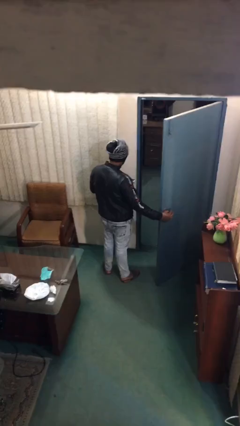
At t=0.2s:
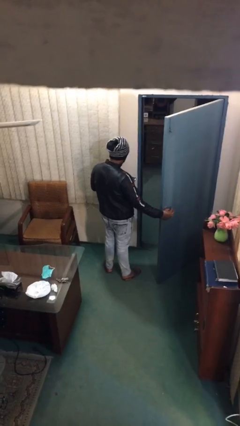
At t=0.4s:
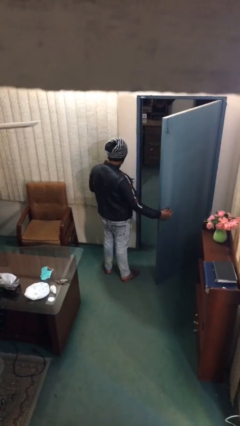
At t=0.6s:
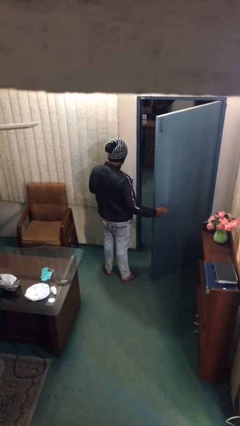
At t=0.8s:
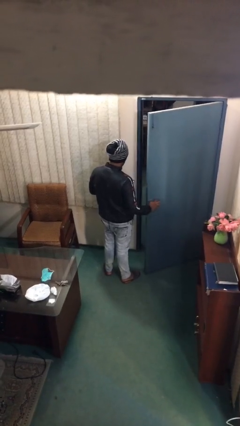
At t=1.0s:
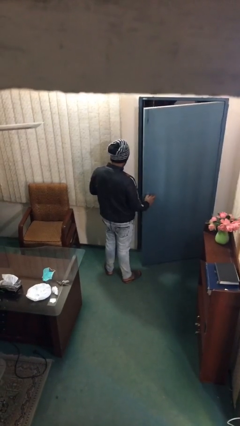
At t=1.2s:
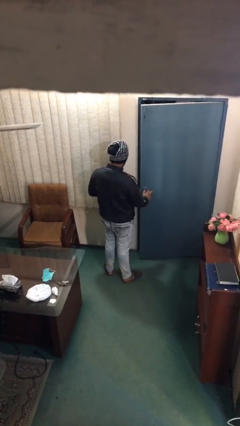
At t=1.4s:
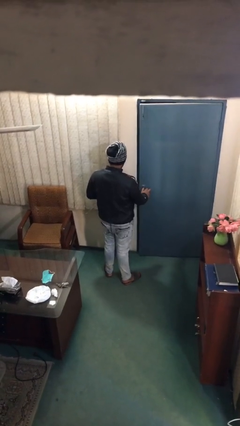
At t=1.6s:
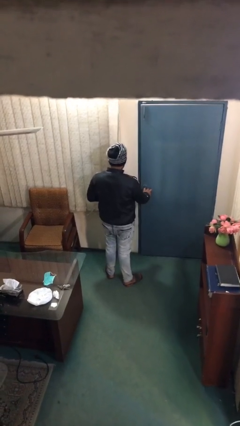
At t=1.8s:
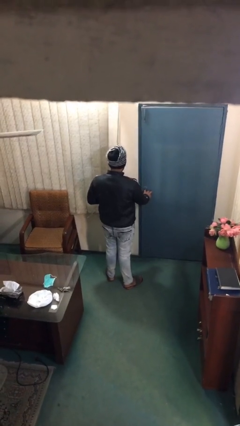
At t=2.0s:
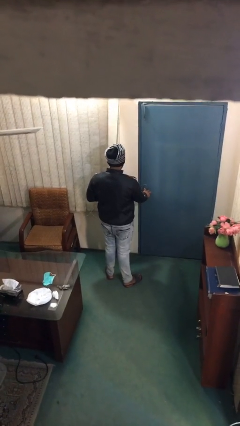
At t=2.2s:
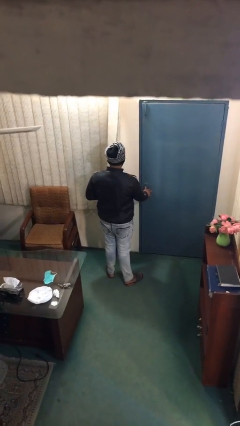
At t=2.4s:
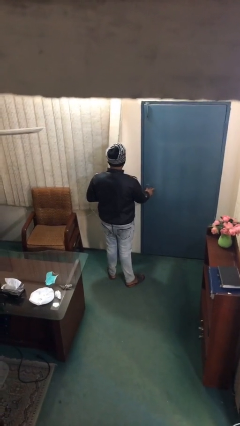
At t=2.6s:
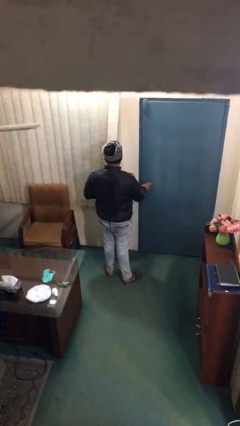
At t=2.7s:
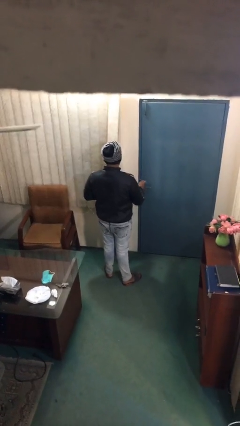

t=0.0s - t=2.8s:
person closes facility door

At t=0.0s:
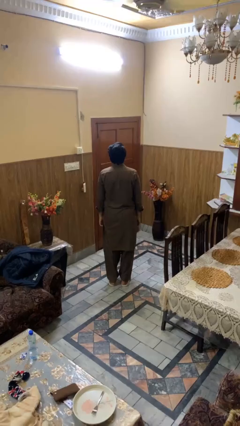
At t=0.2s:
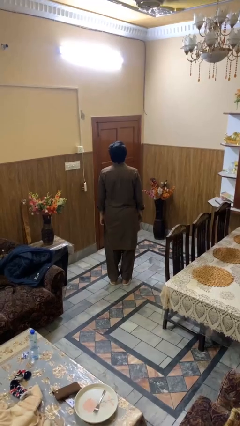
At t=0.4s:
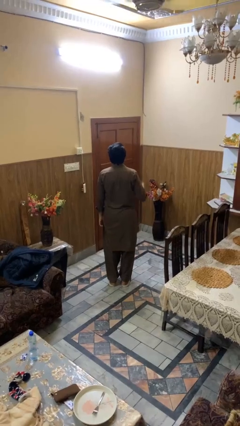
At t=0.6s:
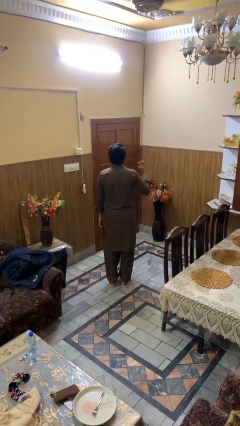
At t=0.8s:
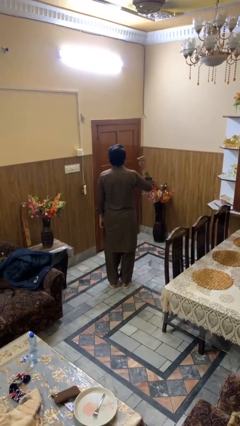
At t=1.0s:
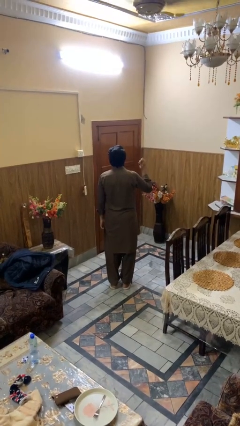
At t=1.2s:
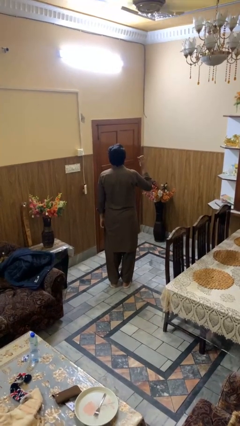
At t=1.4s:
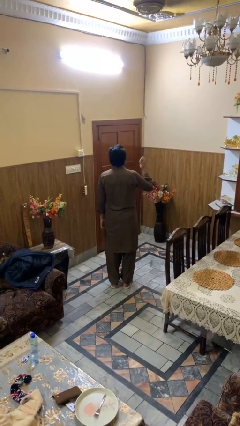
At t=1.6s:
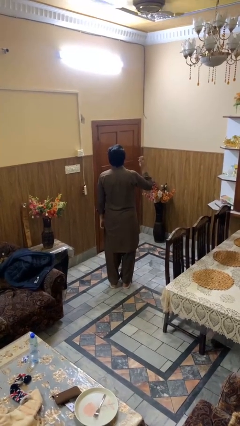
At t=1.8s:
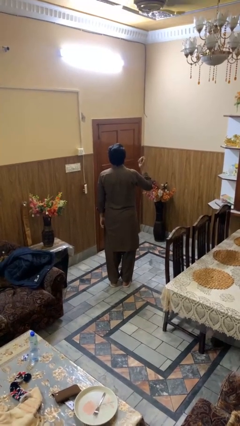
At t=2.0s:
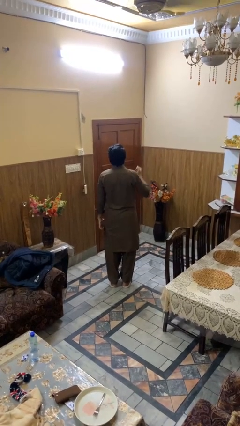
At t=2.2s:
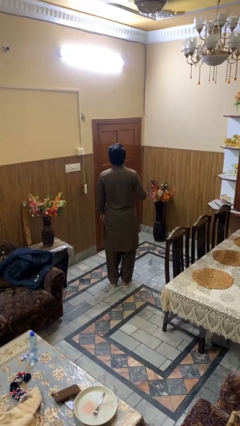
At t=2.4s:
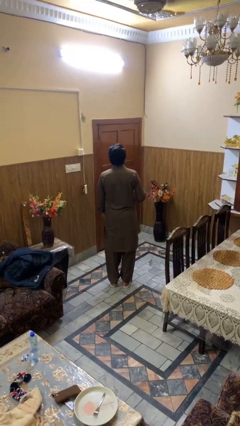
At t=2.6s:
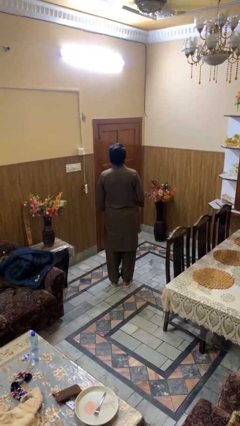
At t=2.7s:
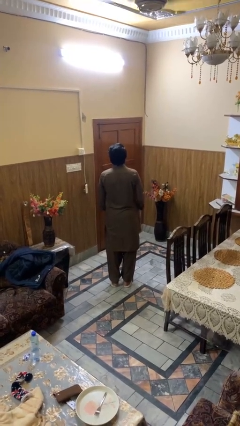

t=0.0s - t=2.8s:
person snaps fingers

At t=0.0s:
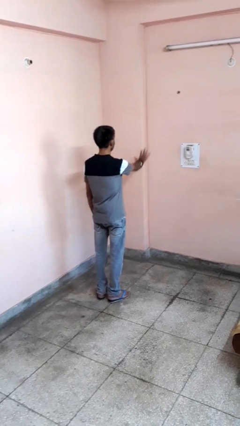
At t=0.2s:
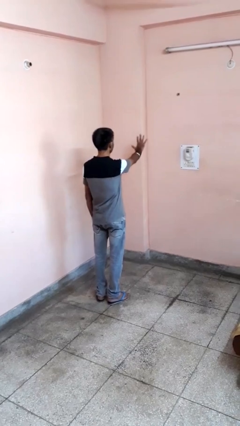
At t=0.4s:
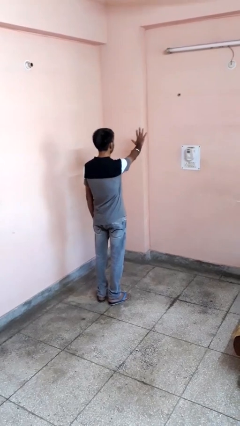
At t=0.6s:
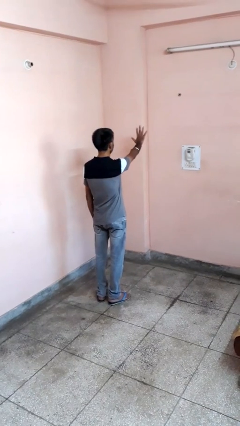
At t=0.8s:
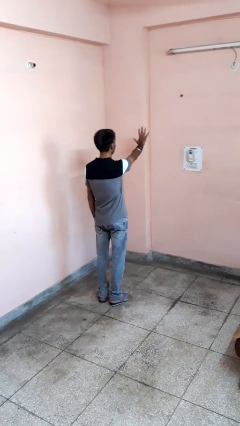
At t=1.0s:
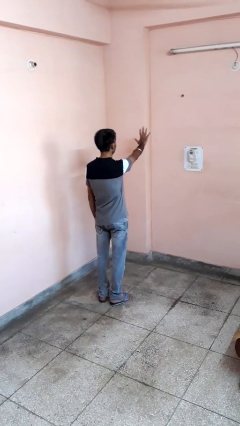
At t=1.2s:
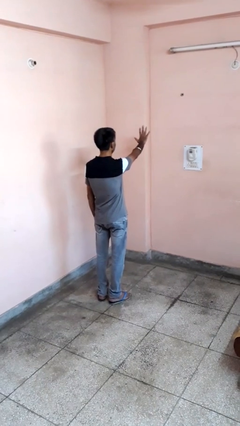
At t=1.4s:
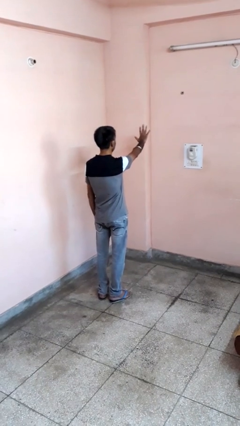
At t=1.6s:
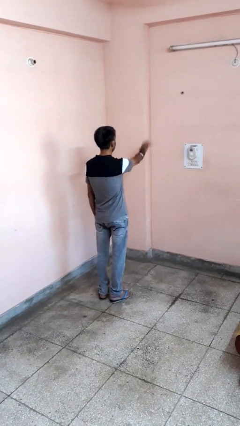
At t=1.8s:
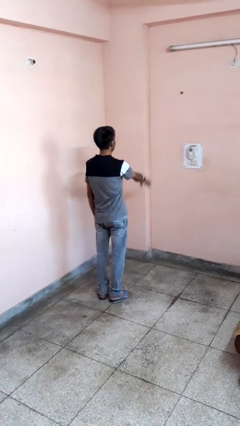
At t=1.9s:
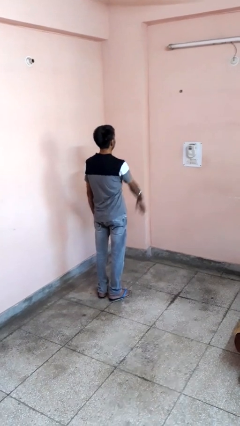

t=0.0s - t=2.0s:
person gestures number five

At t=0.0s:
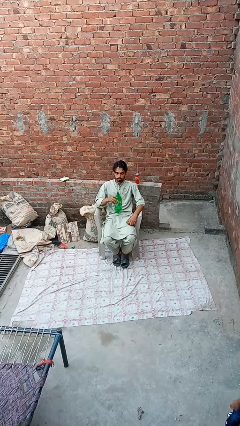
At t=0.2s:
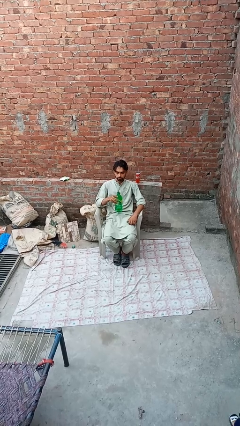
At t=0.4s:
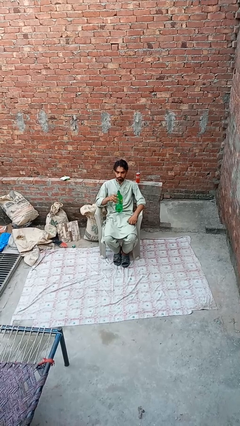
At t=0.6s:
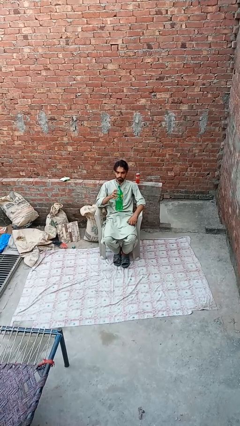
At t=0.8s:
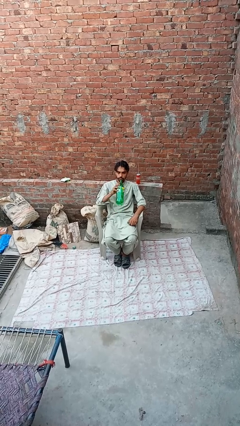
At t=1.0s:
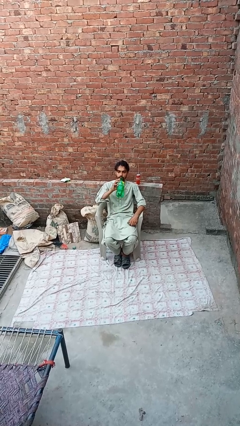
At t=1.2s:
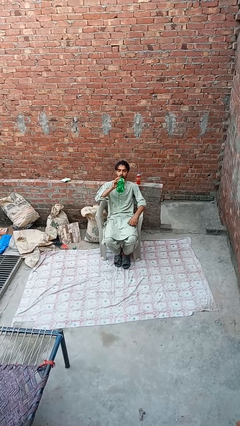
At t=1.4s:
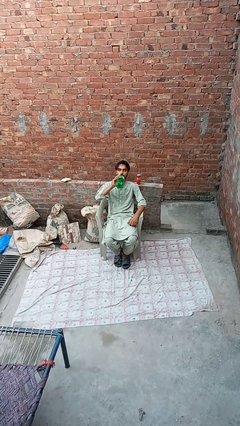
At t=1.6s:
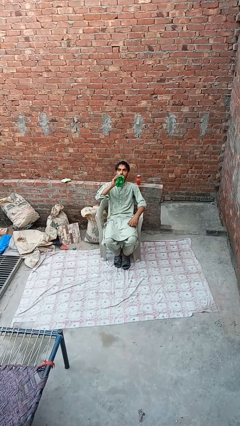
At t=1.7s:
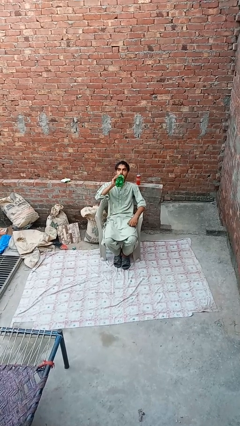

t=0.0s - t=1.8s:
person drinks from bottle

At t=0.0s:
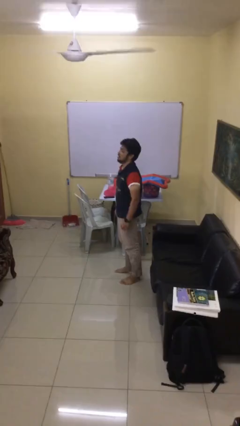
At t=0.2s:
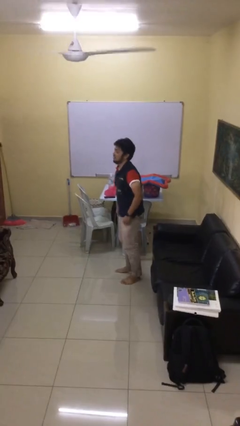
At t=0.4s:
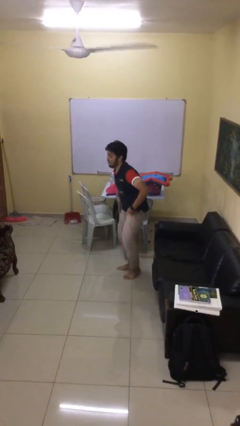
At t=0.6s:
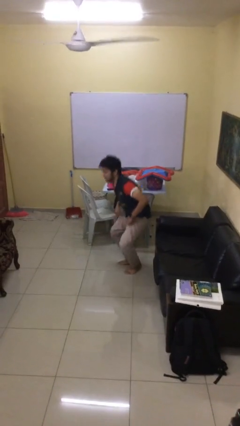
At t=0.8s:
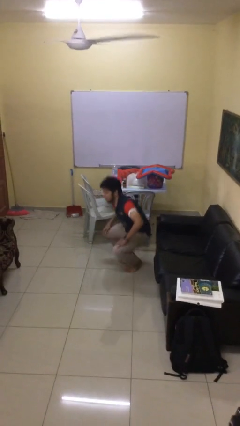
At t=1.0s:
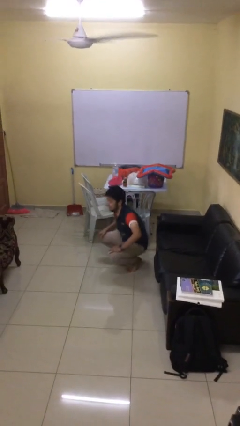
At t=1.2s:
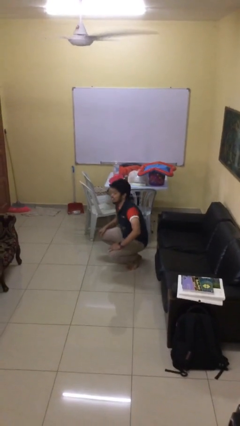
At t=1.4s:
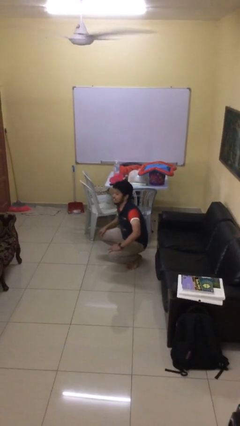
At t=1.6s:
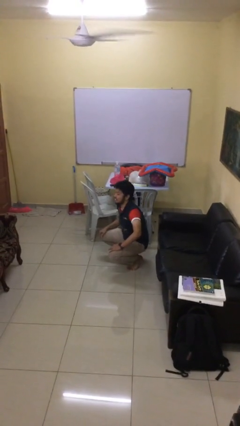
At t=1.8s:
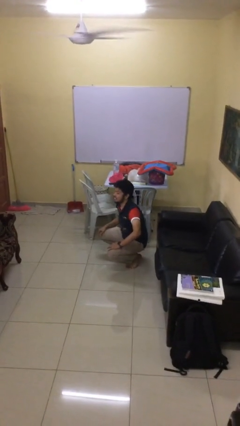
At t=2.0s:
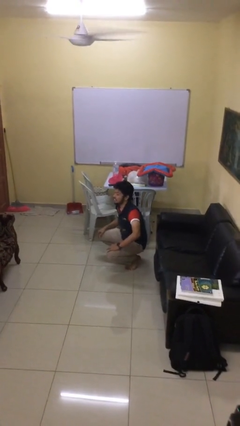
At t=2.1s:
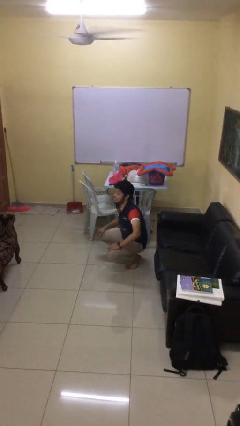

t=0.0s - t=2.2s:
person squats

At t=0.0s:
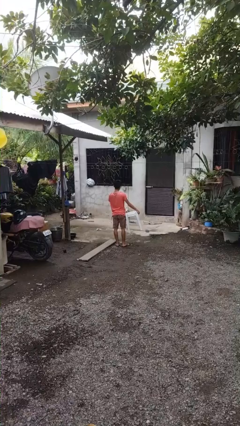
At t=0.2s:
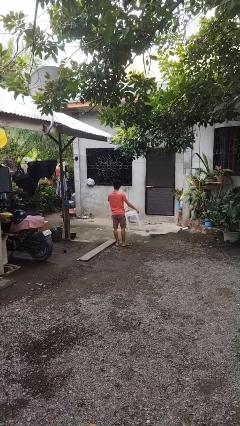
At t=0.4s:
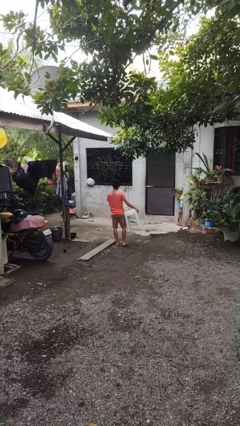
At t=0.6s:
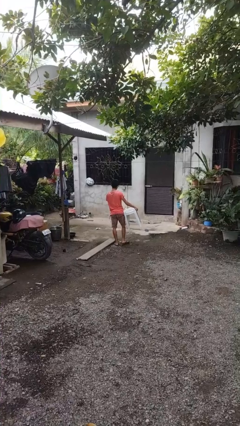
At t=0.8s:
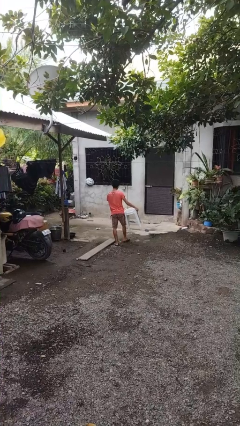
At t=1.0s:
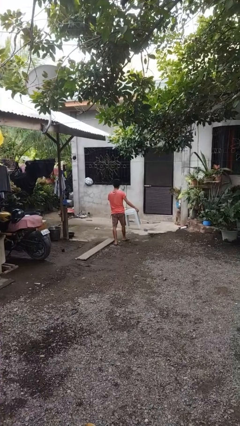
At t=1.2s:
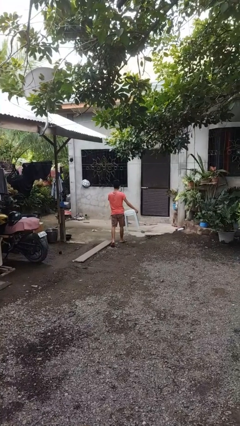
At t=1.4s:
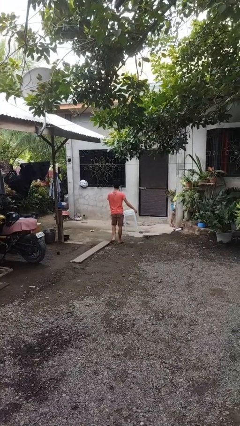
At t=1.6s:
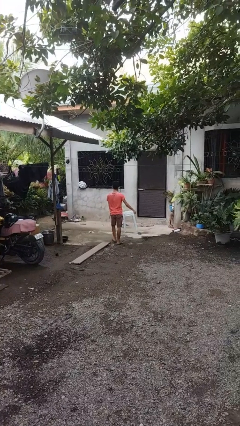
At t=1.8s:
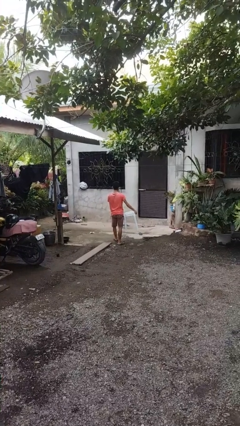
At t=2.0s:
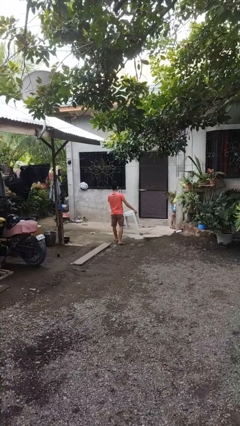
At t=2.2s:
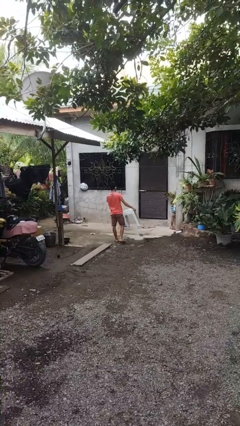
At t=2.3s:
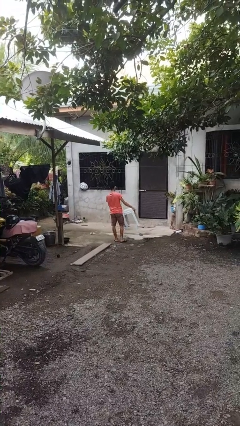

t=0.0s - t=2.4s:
person carries furniture

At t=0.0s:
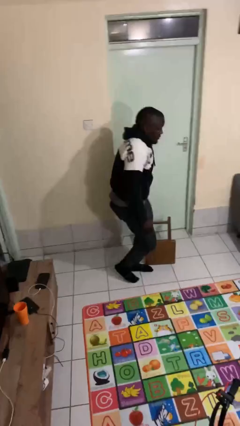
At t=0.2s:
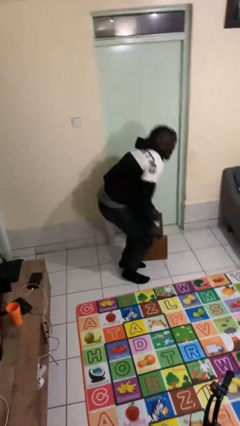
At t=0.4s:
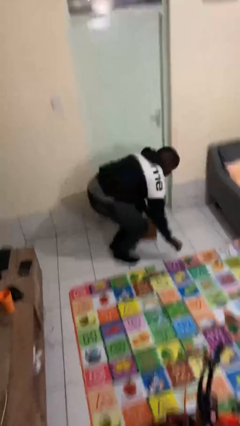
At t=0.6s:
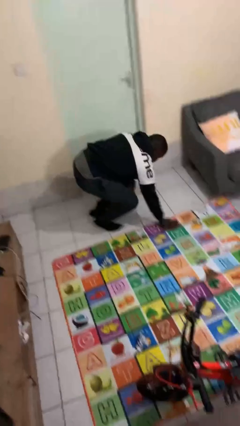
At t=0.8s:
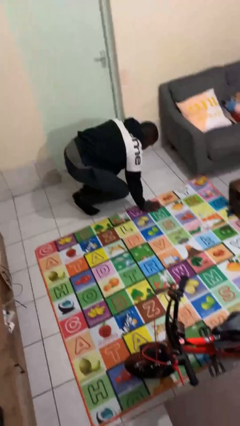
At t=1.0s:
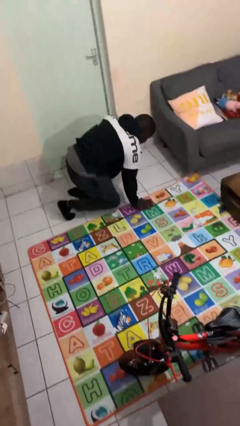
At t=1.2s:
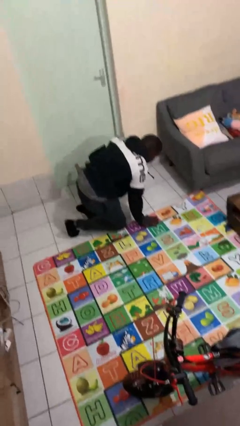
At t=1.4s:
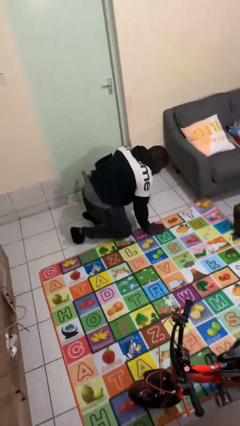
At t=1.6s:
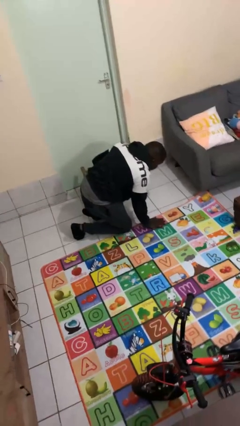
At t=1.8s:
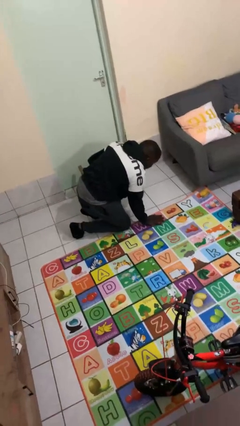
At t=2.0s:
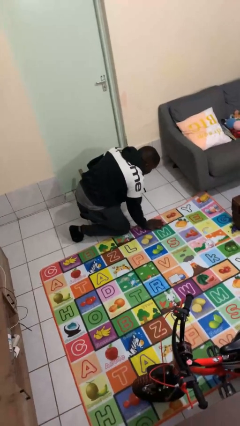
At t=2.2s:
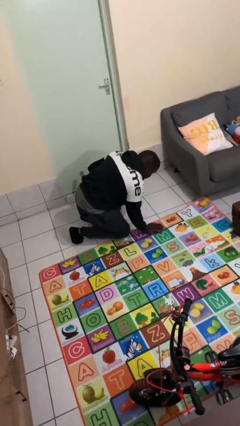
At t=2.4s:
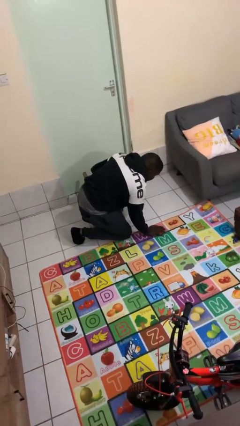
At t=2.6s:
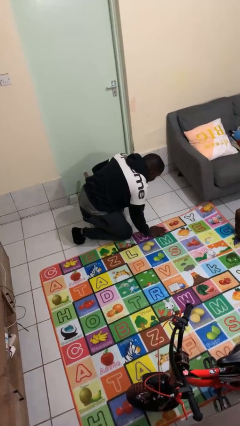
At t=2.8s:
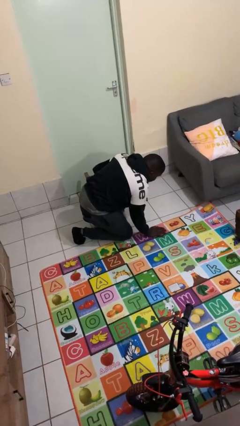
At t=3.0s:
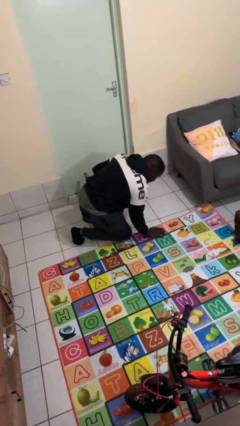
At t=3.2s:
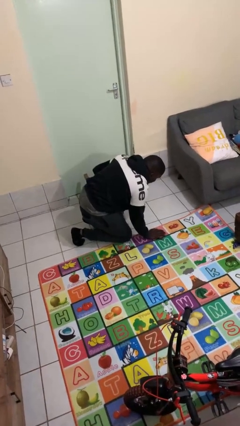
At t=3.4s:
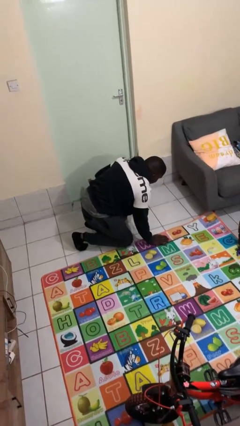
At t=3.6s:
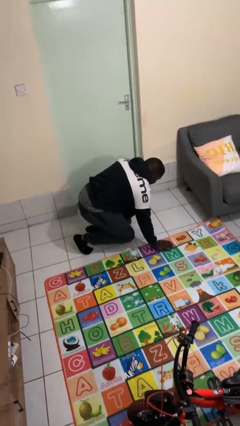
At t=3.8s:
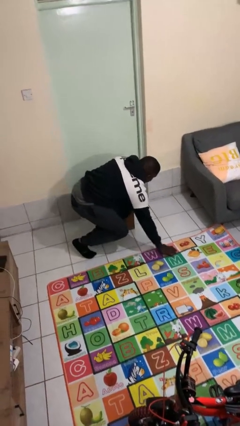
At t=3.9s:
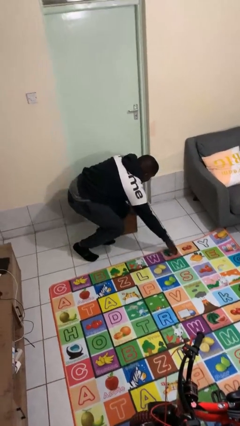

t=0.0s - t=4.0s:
person trips on object on floor
